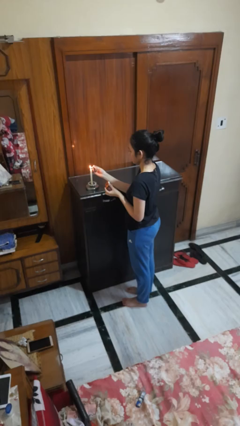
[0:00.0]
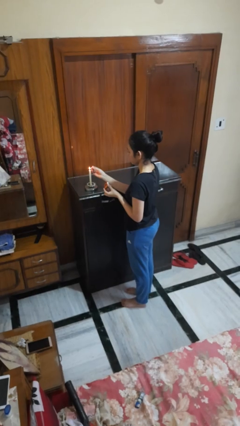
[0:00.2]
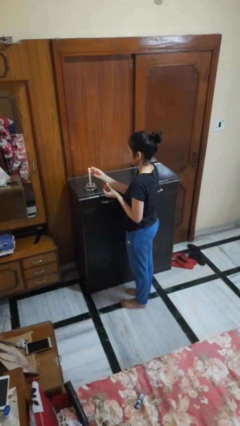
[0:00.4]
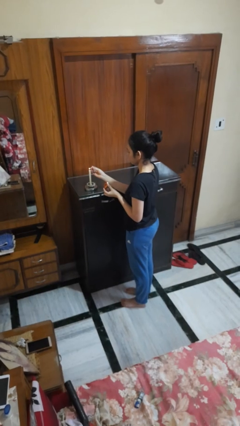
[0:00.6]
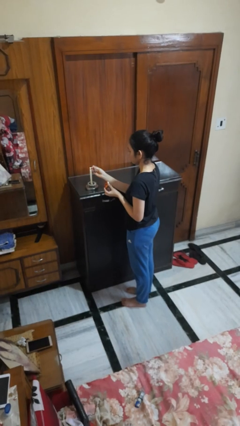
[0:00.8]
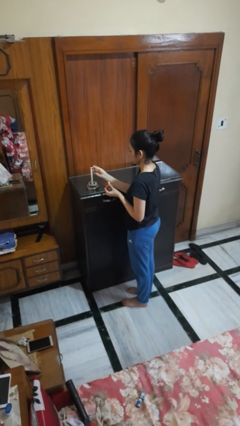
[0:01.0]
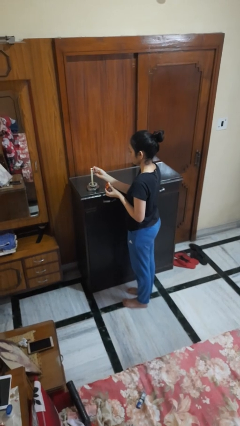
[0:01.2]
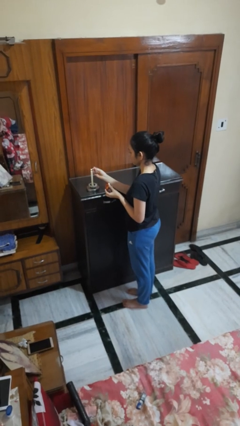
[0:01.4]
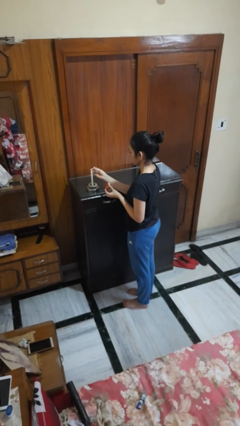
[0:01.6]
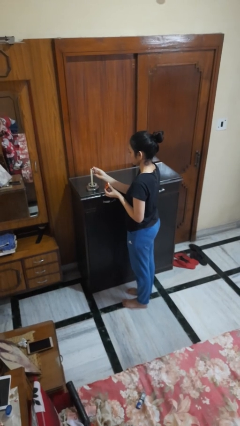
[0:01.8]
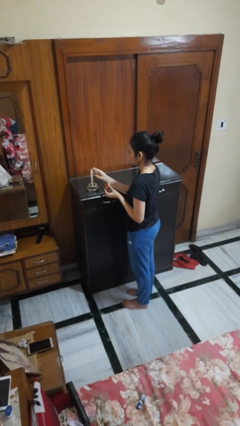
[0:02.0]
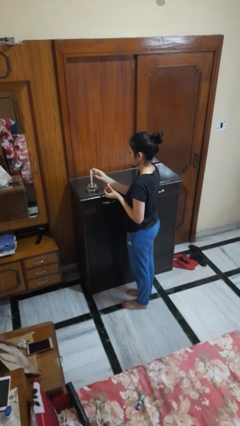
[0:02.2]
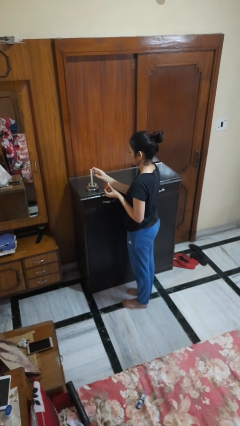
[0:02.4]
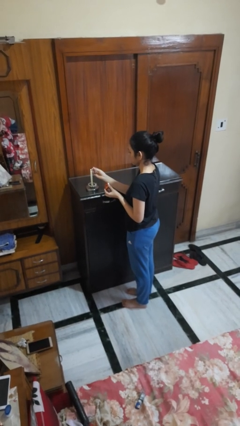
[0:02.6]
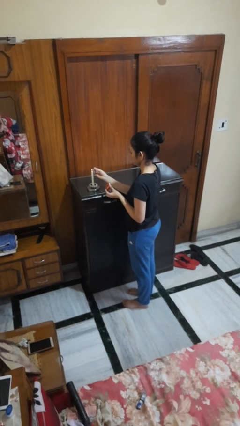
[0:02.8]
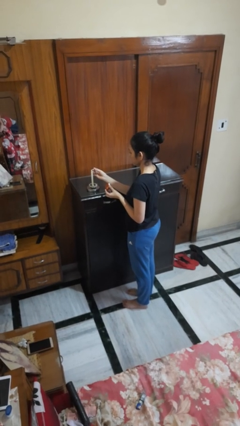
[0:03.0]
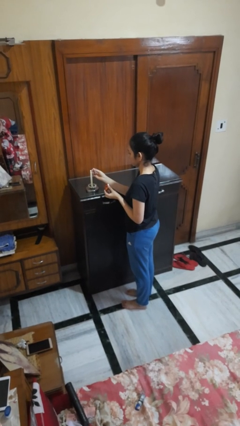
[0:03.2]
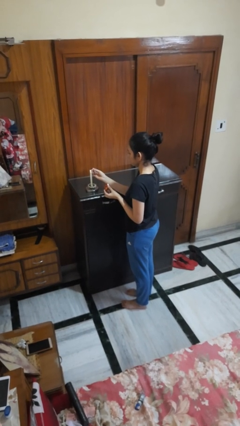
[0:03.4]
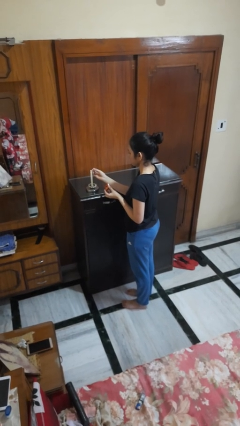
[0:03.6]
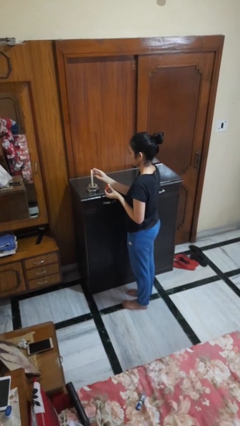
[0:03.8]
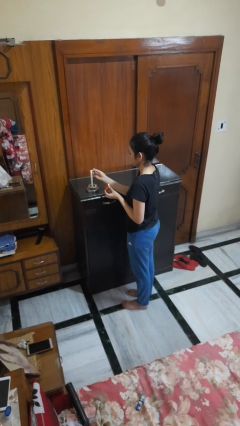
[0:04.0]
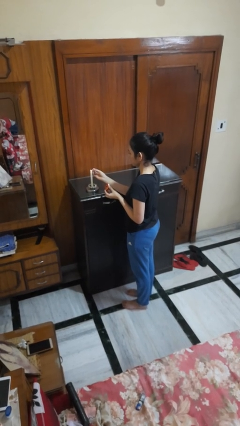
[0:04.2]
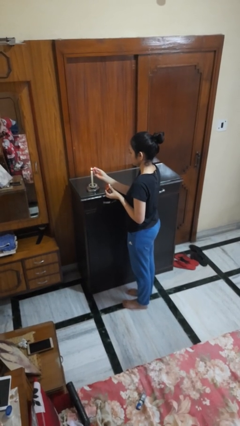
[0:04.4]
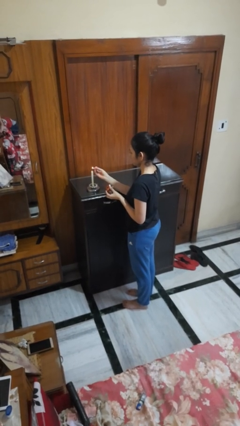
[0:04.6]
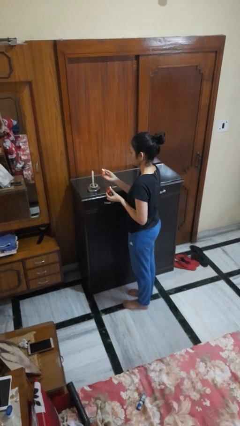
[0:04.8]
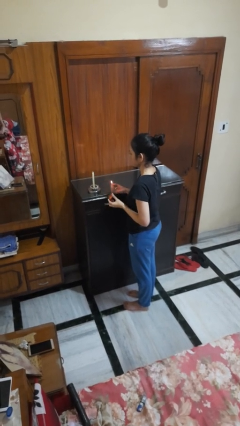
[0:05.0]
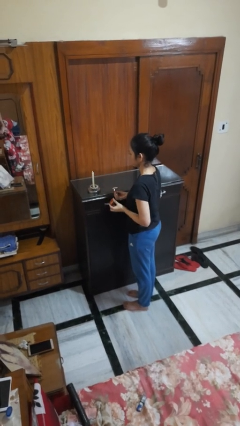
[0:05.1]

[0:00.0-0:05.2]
person lights candle

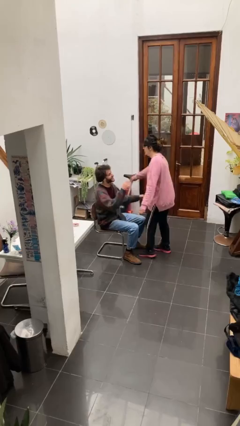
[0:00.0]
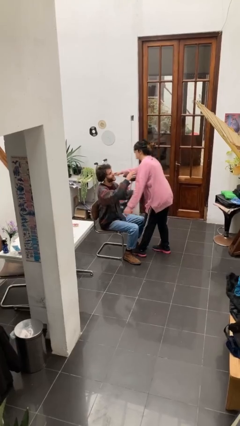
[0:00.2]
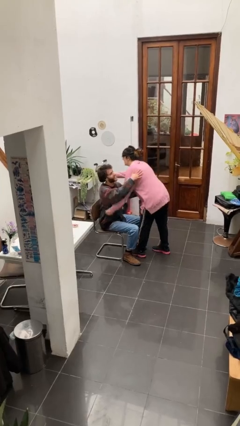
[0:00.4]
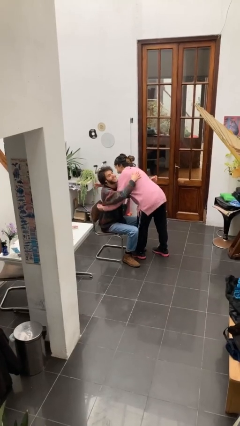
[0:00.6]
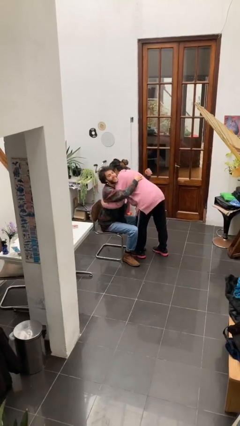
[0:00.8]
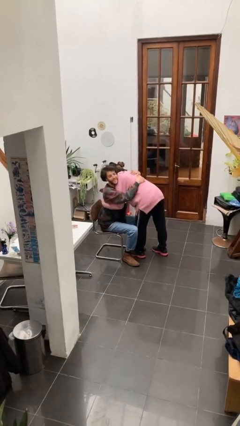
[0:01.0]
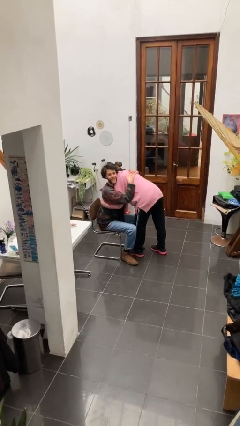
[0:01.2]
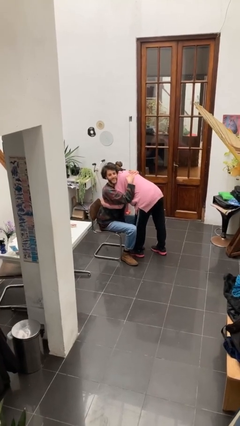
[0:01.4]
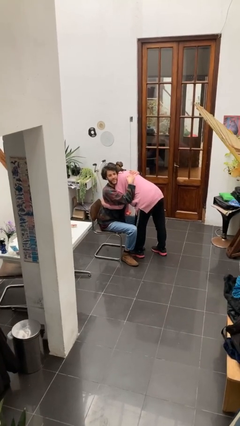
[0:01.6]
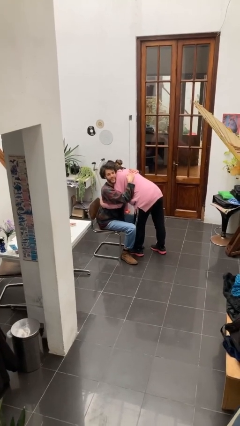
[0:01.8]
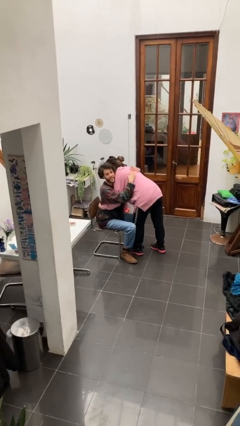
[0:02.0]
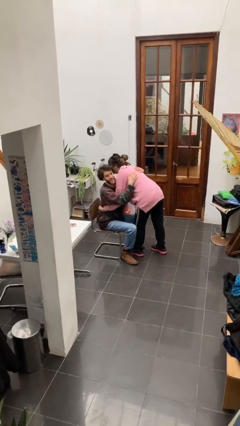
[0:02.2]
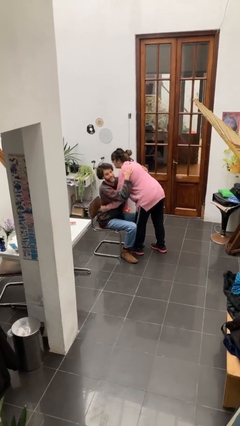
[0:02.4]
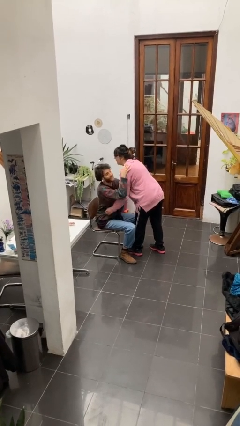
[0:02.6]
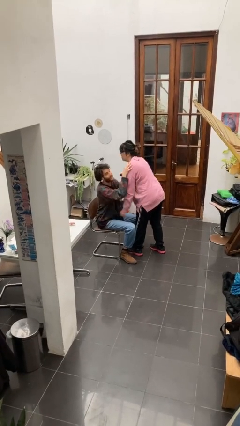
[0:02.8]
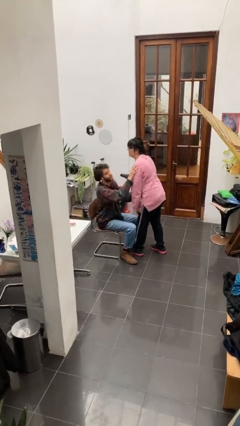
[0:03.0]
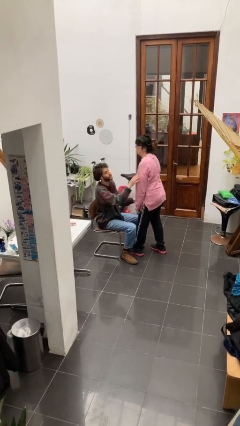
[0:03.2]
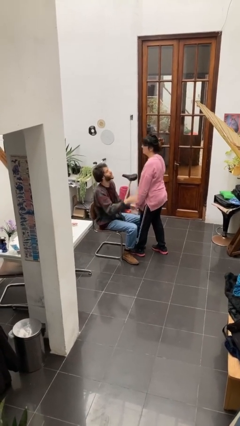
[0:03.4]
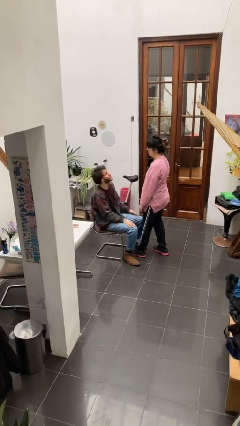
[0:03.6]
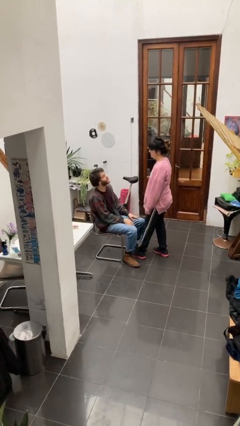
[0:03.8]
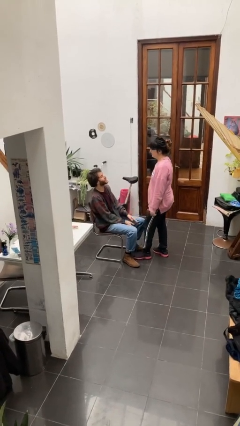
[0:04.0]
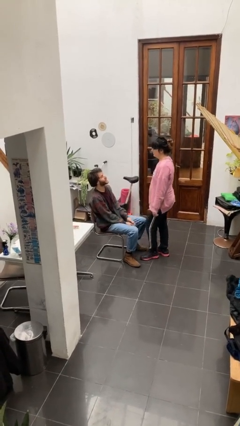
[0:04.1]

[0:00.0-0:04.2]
person embraces person

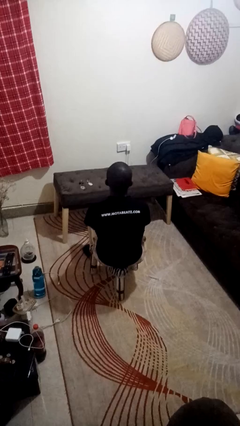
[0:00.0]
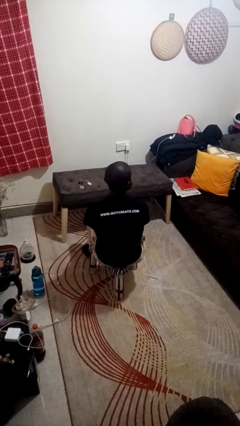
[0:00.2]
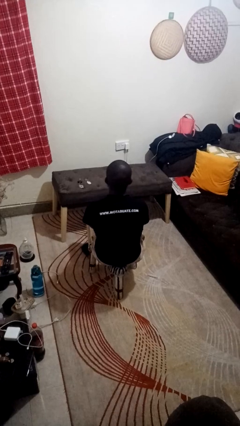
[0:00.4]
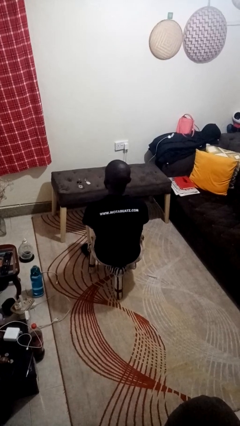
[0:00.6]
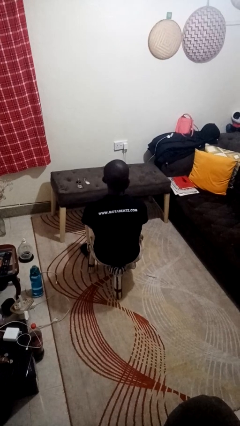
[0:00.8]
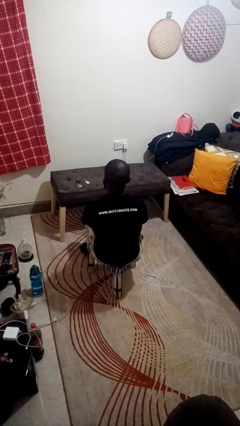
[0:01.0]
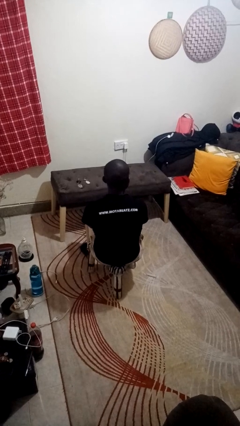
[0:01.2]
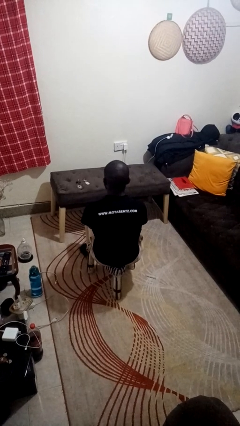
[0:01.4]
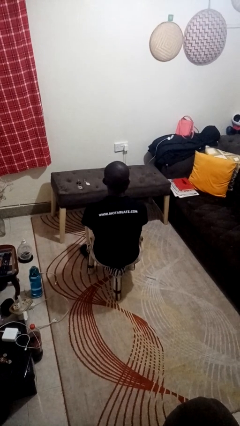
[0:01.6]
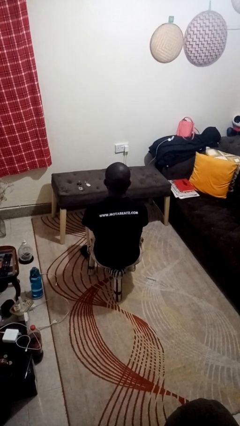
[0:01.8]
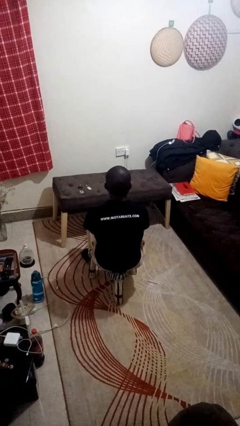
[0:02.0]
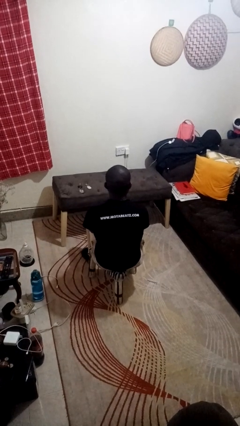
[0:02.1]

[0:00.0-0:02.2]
person shakes head

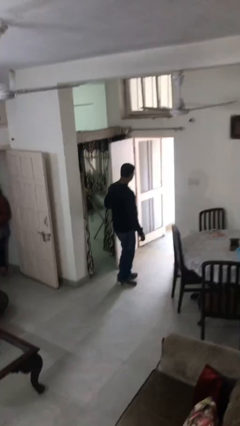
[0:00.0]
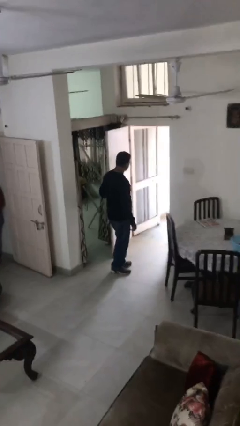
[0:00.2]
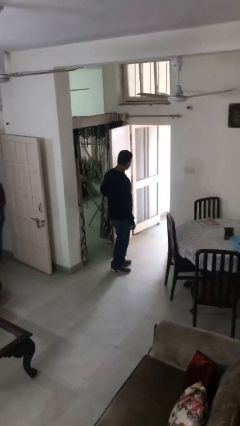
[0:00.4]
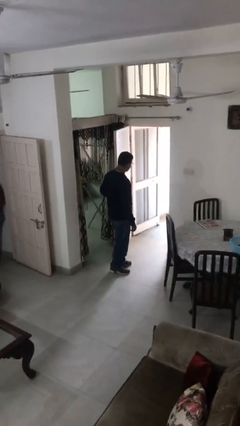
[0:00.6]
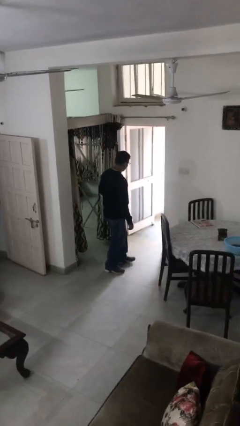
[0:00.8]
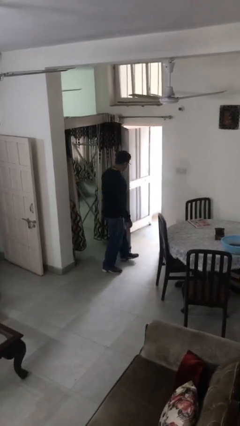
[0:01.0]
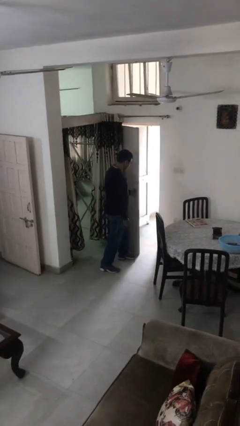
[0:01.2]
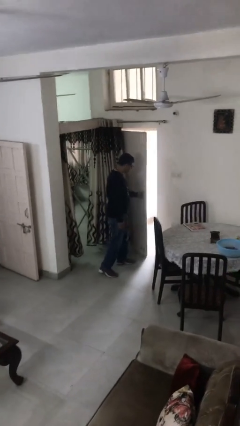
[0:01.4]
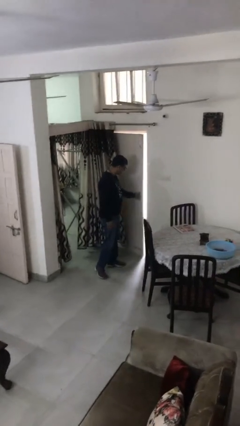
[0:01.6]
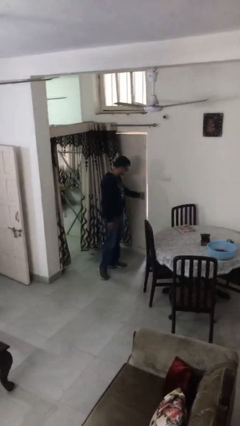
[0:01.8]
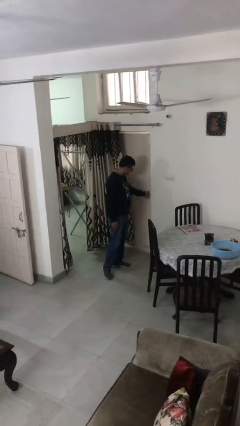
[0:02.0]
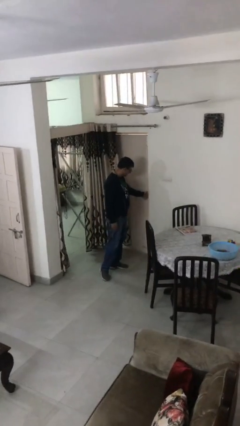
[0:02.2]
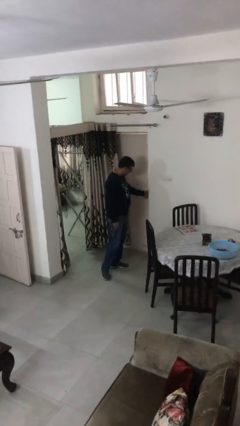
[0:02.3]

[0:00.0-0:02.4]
person closes facility door

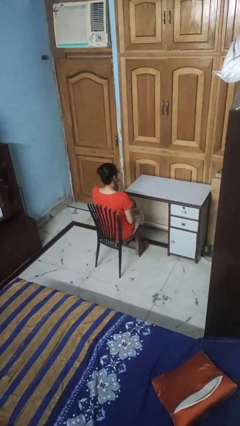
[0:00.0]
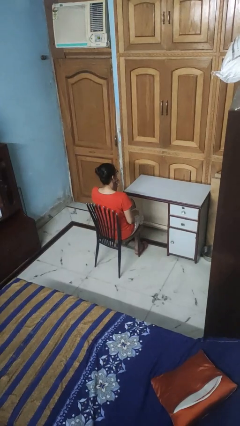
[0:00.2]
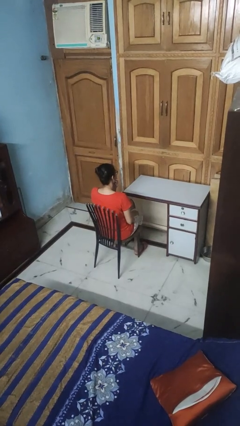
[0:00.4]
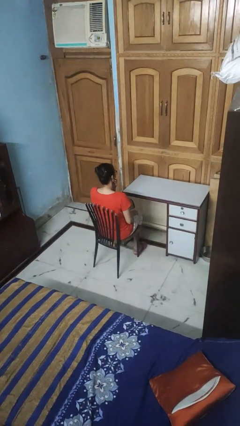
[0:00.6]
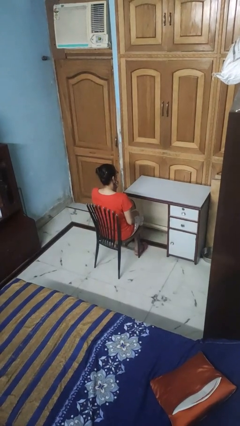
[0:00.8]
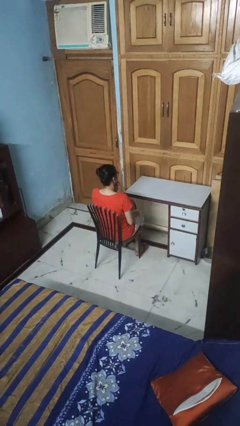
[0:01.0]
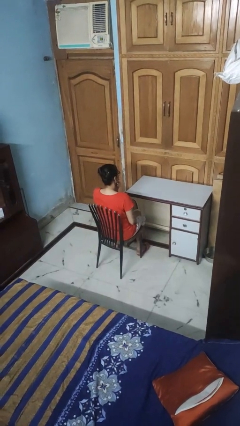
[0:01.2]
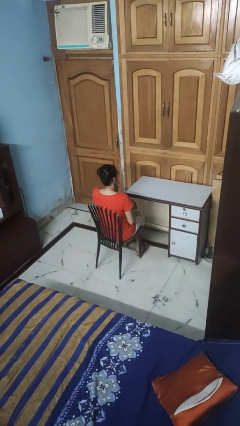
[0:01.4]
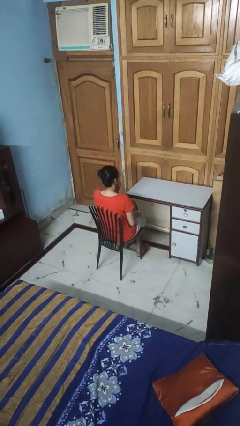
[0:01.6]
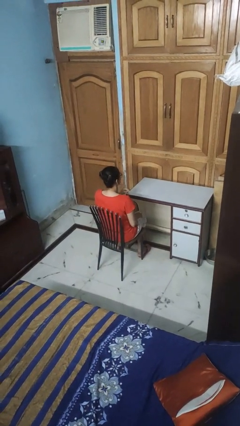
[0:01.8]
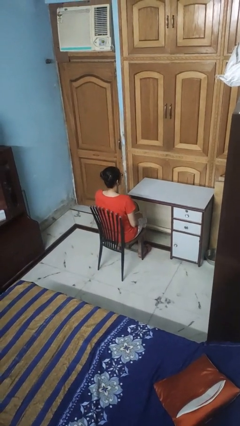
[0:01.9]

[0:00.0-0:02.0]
person strokes chin

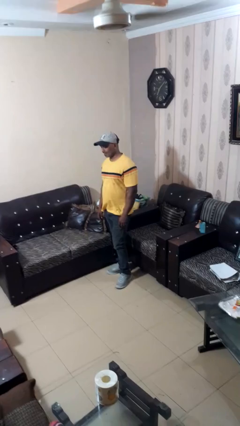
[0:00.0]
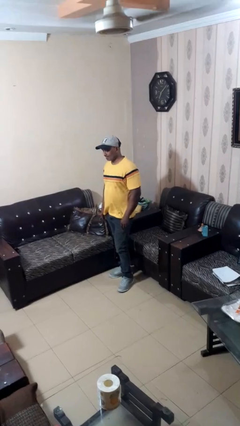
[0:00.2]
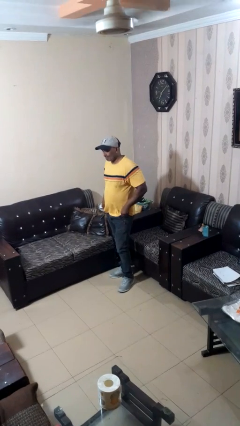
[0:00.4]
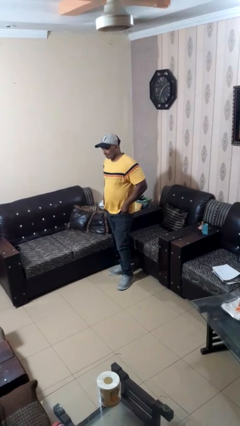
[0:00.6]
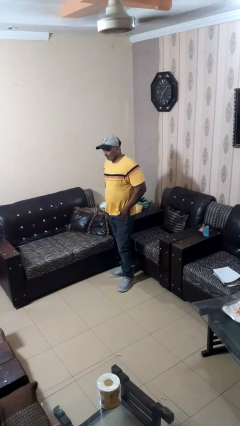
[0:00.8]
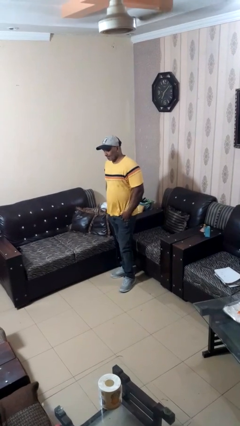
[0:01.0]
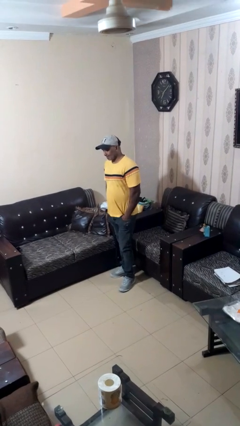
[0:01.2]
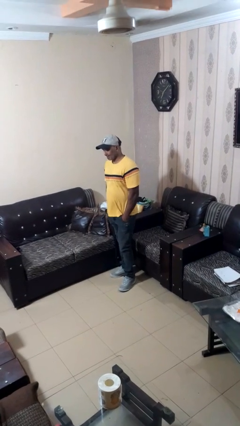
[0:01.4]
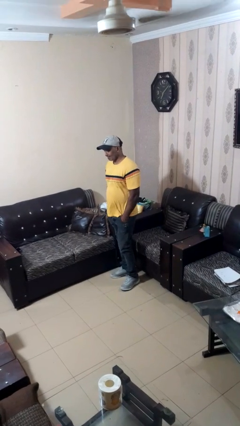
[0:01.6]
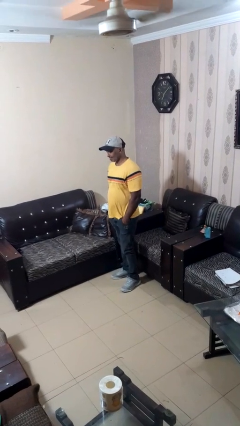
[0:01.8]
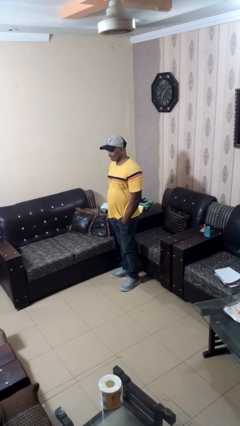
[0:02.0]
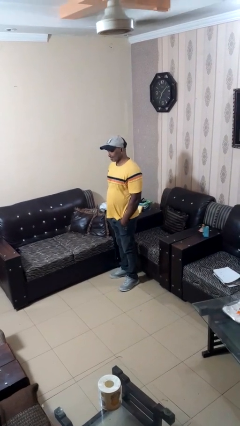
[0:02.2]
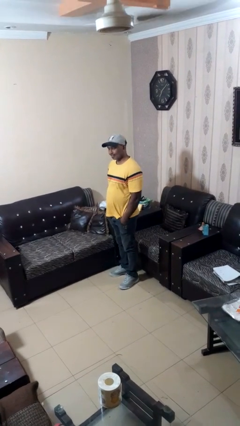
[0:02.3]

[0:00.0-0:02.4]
person puts hands in back pockets
